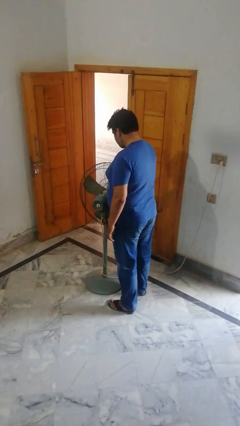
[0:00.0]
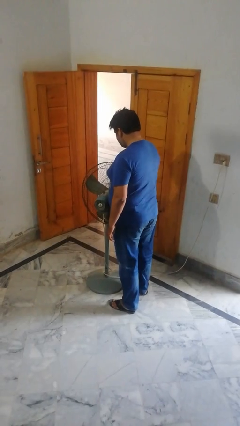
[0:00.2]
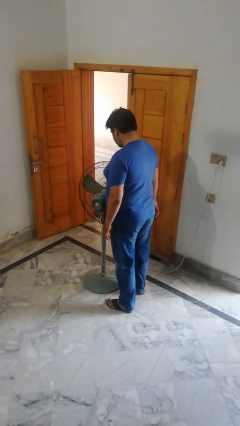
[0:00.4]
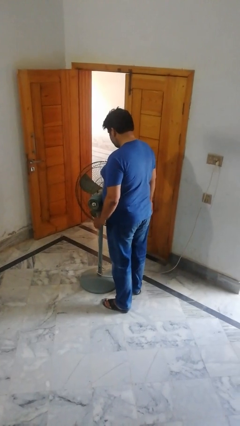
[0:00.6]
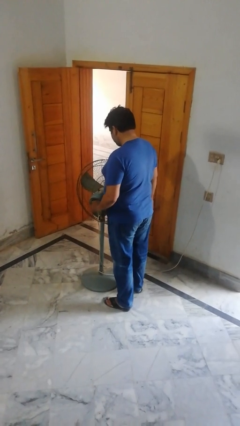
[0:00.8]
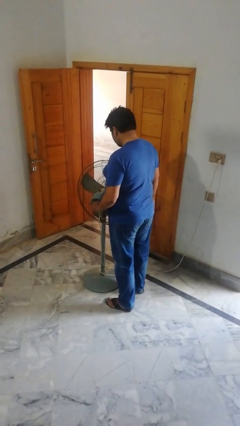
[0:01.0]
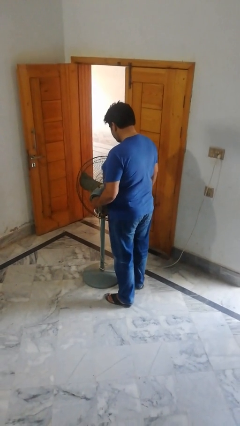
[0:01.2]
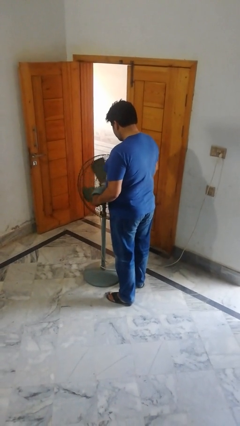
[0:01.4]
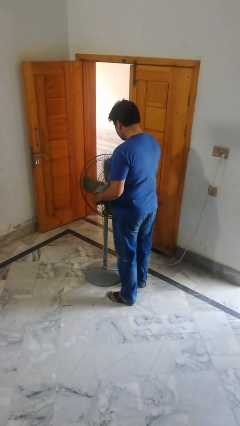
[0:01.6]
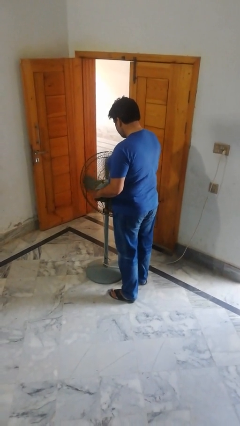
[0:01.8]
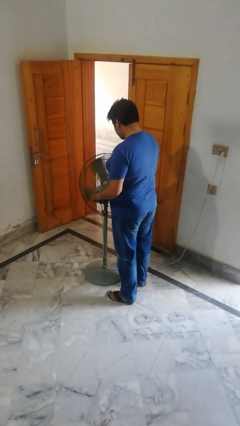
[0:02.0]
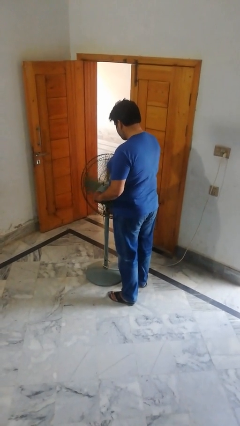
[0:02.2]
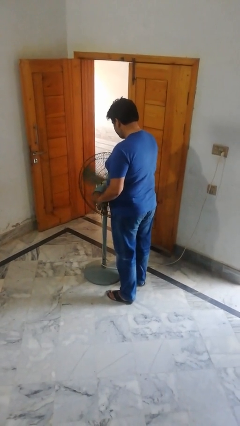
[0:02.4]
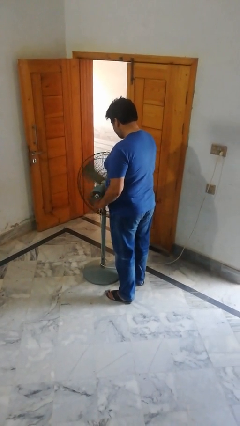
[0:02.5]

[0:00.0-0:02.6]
person turns on fan

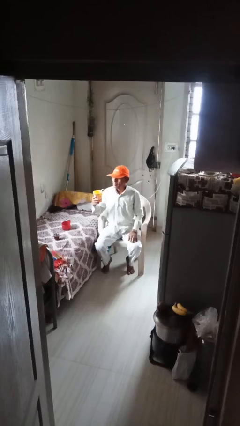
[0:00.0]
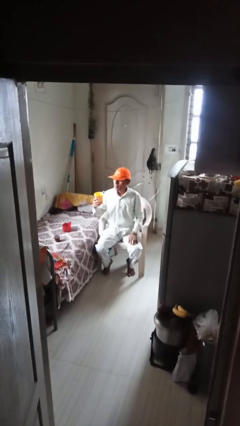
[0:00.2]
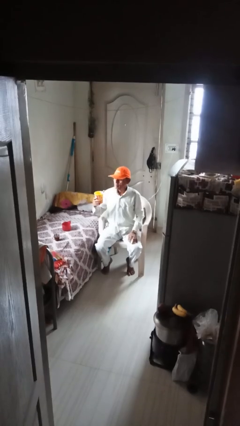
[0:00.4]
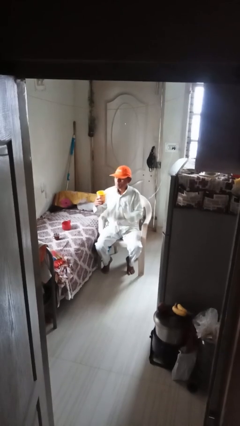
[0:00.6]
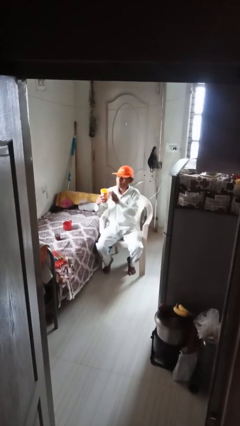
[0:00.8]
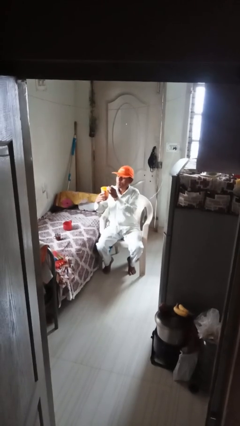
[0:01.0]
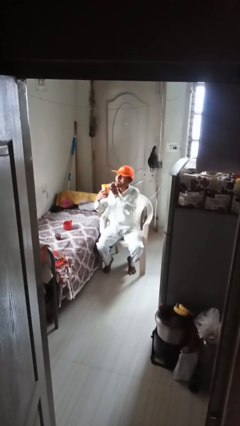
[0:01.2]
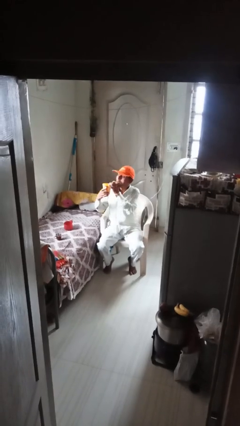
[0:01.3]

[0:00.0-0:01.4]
person drinks from straw

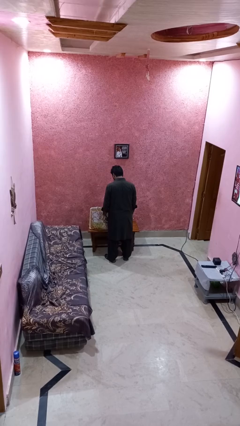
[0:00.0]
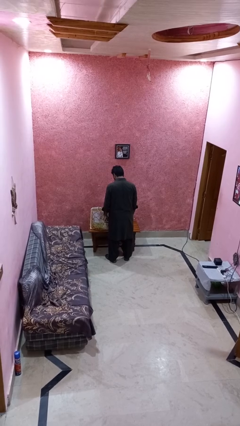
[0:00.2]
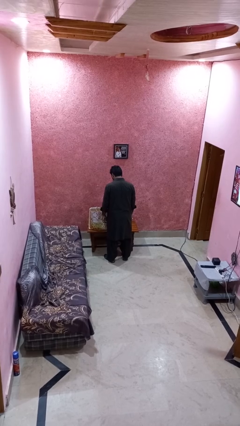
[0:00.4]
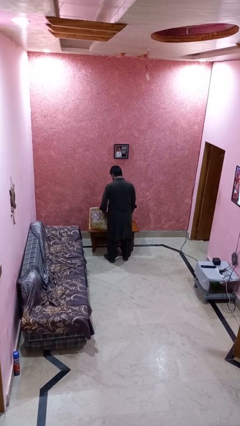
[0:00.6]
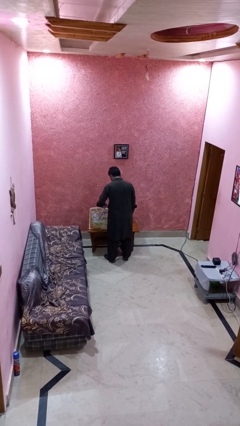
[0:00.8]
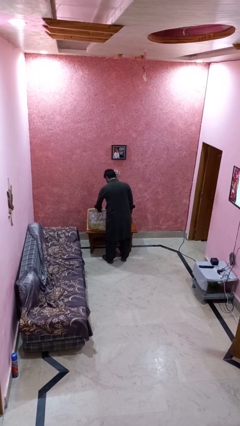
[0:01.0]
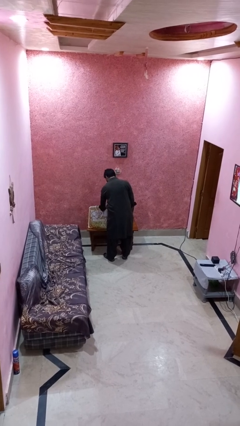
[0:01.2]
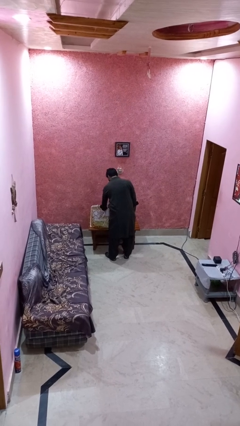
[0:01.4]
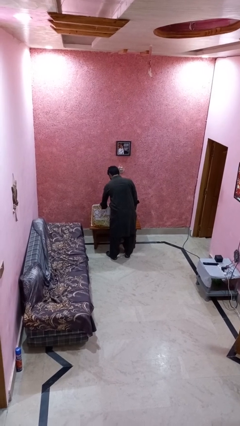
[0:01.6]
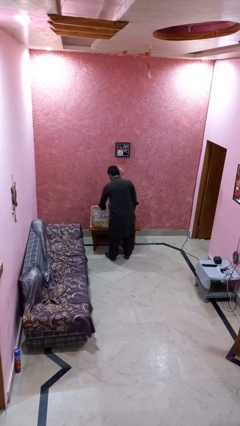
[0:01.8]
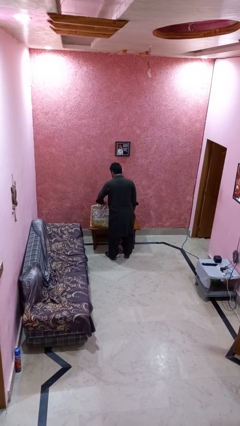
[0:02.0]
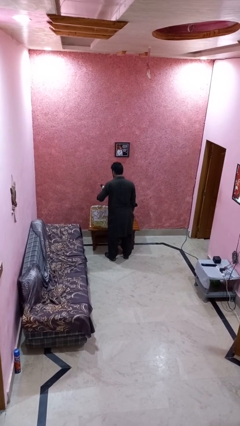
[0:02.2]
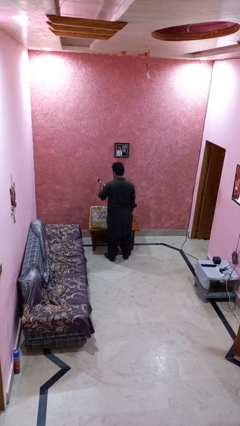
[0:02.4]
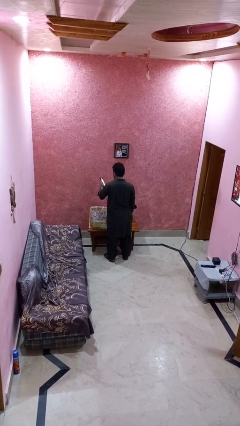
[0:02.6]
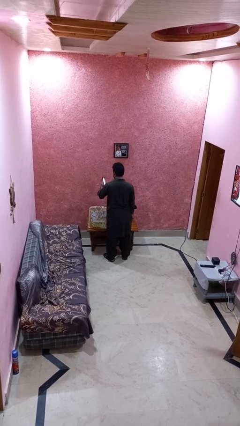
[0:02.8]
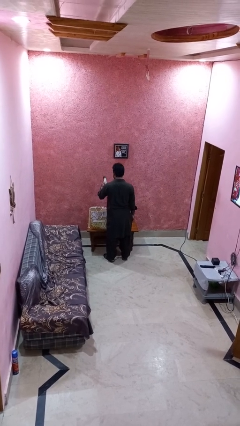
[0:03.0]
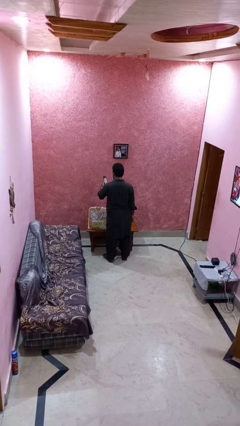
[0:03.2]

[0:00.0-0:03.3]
person takes object from bag

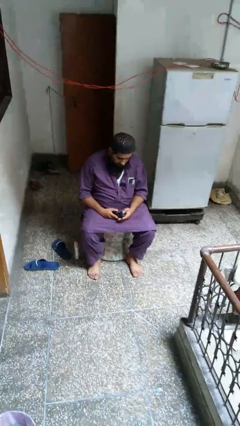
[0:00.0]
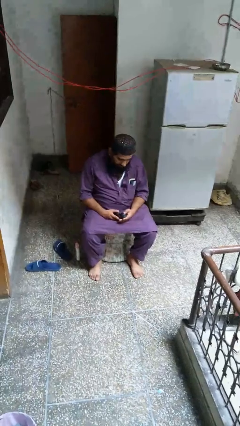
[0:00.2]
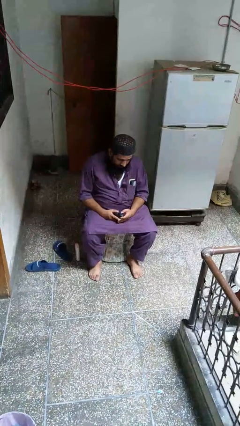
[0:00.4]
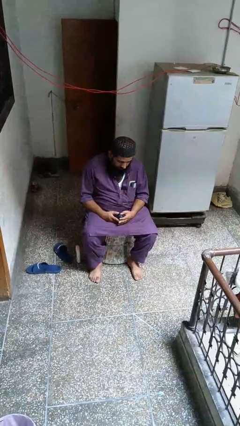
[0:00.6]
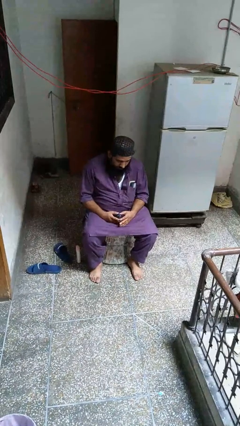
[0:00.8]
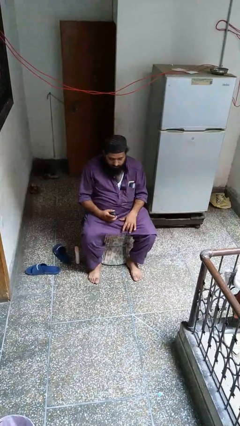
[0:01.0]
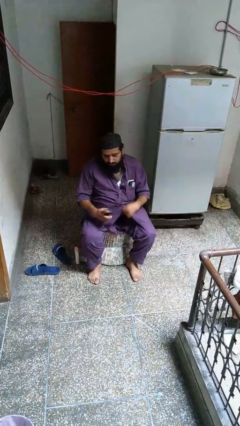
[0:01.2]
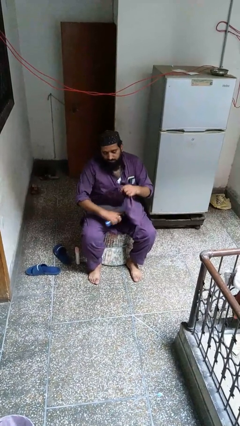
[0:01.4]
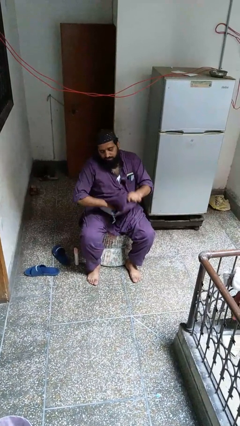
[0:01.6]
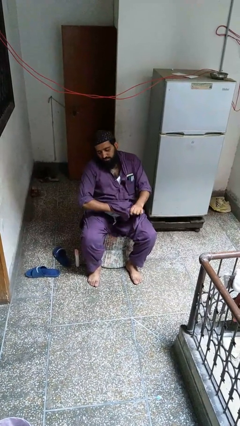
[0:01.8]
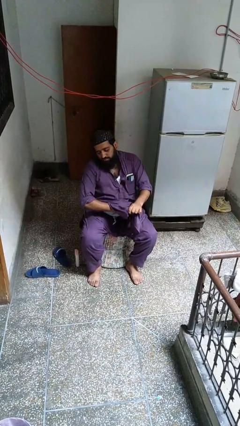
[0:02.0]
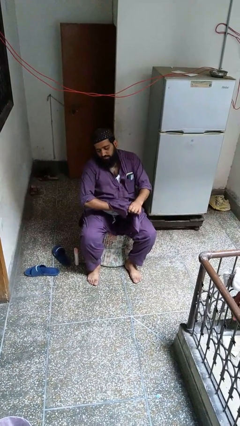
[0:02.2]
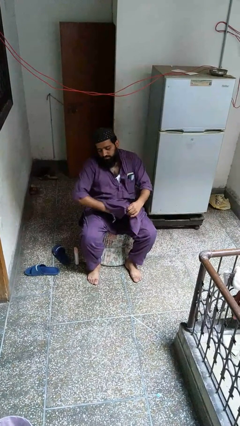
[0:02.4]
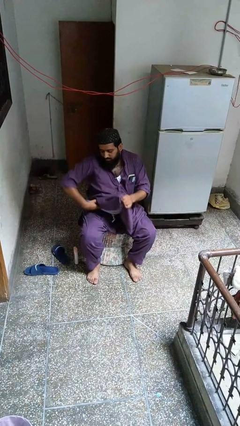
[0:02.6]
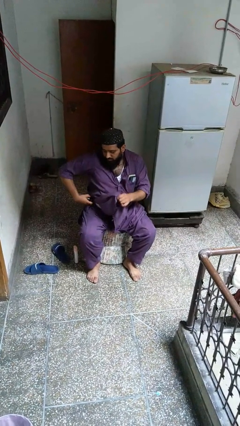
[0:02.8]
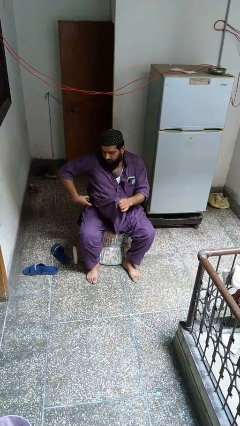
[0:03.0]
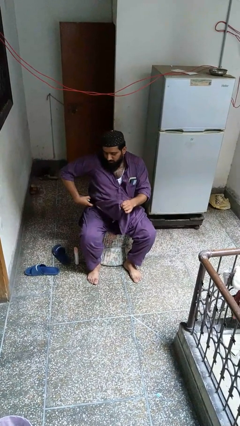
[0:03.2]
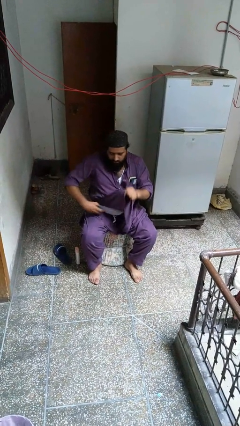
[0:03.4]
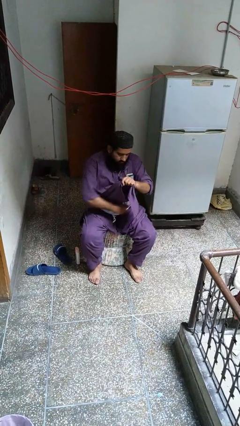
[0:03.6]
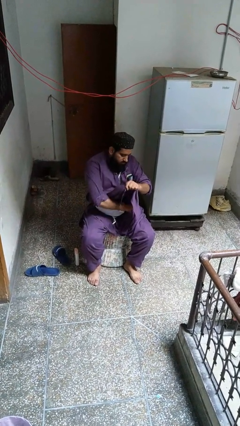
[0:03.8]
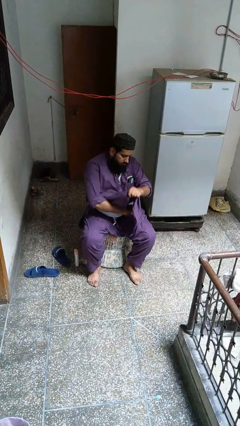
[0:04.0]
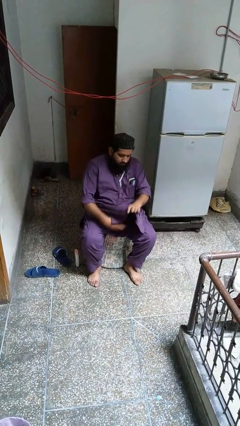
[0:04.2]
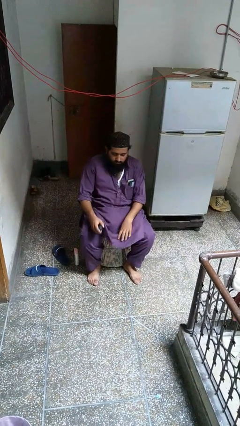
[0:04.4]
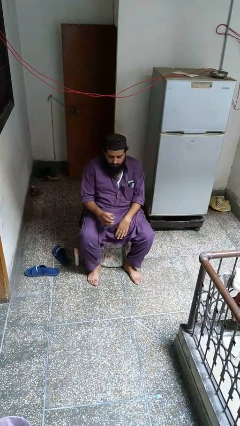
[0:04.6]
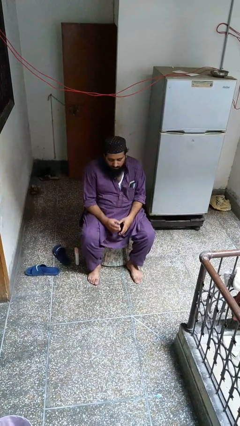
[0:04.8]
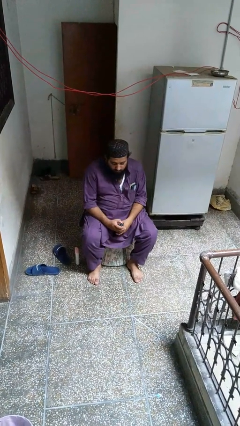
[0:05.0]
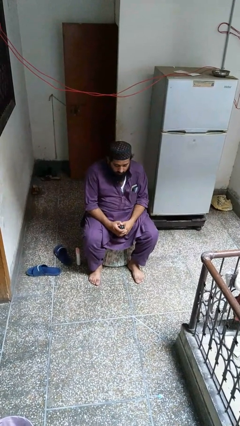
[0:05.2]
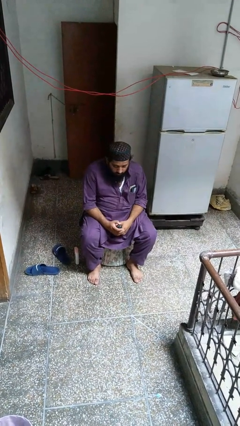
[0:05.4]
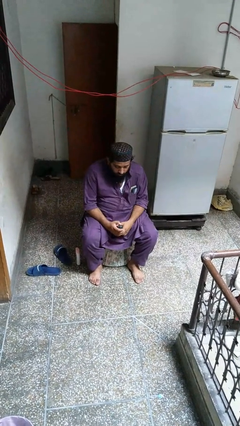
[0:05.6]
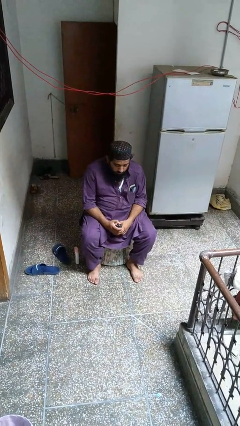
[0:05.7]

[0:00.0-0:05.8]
person applies deodorant

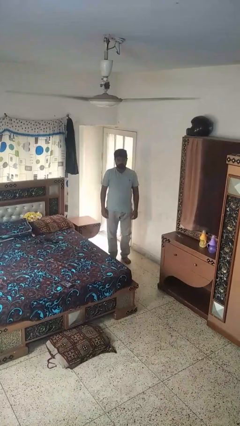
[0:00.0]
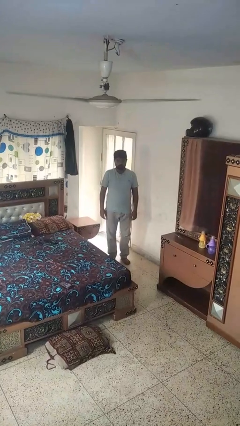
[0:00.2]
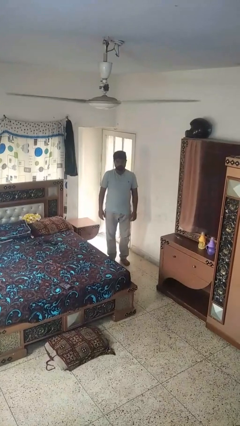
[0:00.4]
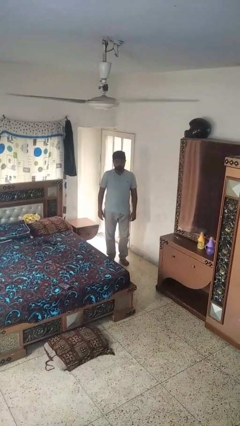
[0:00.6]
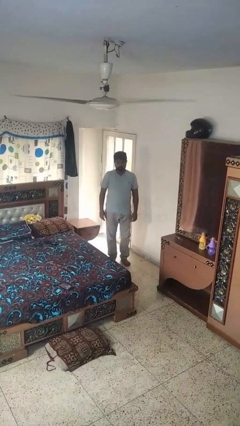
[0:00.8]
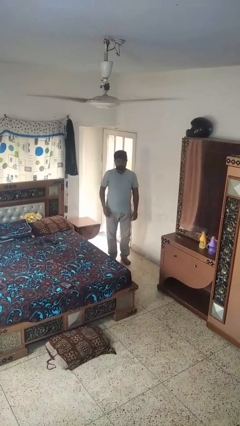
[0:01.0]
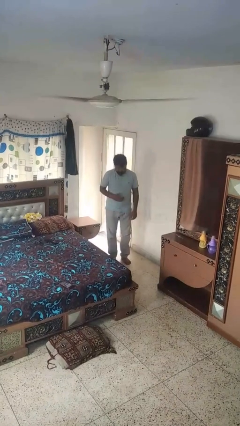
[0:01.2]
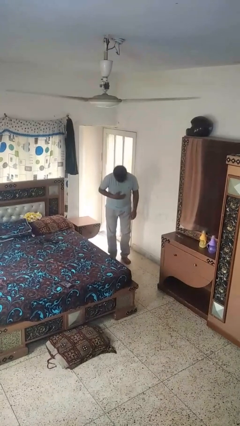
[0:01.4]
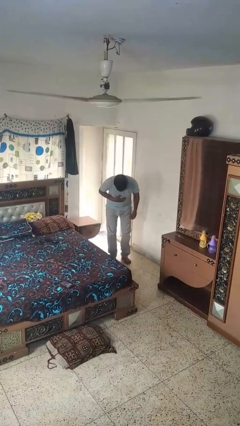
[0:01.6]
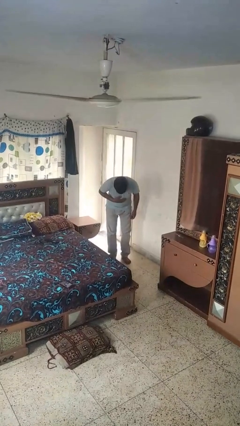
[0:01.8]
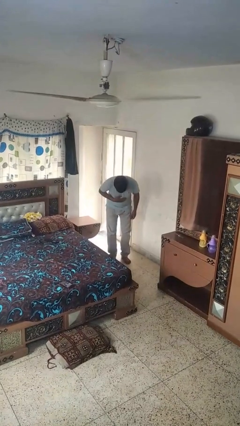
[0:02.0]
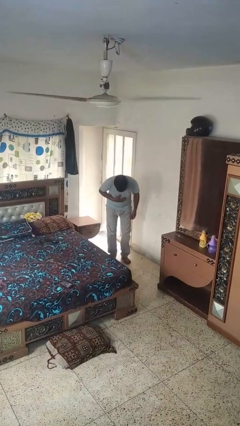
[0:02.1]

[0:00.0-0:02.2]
person bows

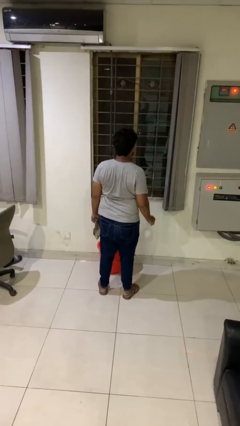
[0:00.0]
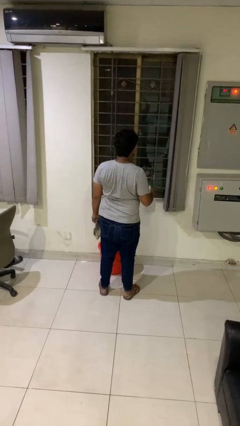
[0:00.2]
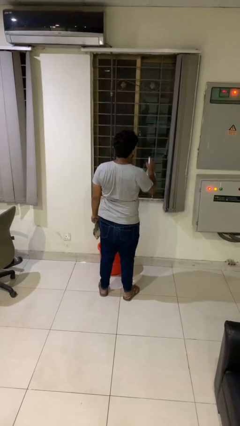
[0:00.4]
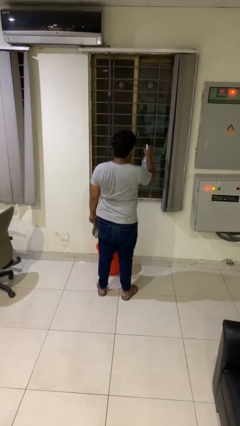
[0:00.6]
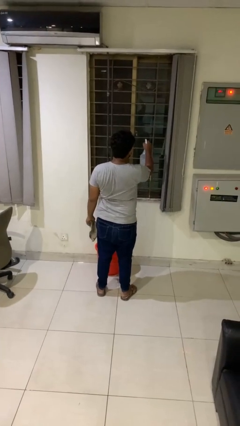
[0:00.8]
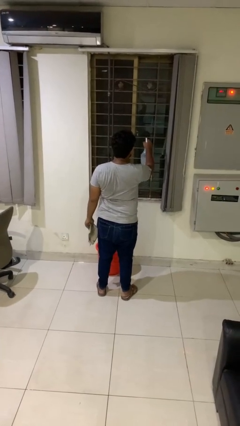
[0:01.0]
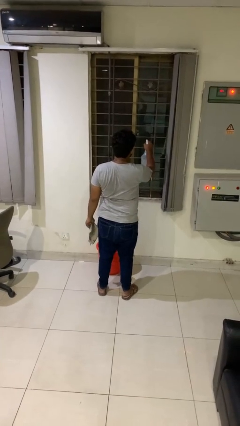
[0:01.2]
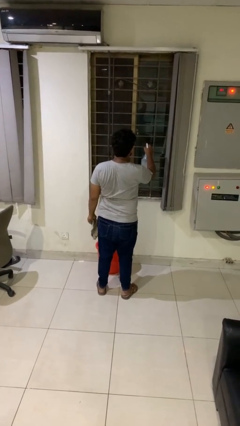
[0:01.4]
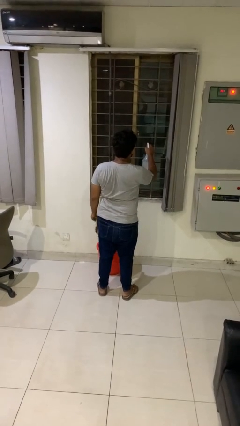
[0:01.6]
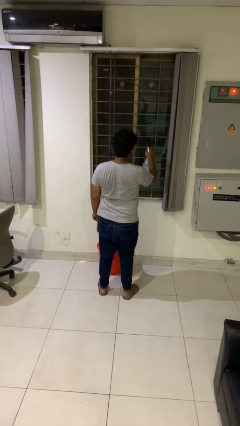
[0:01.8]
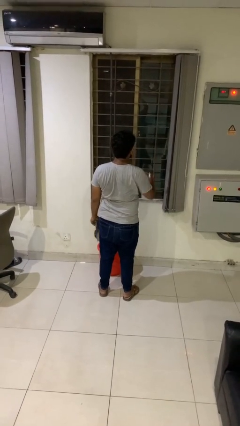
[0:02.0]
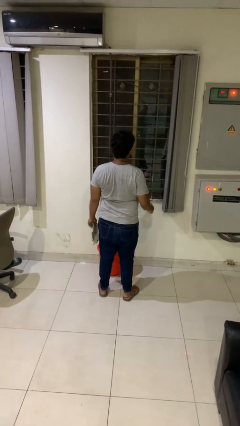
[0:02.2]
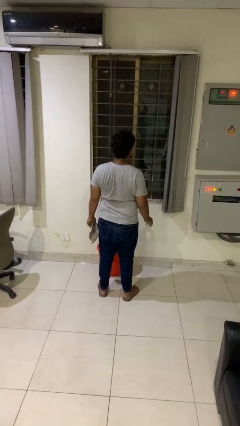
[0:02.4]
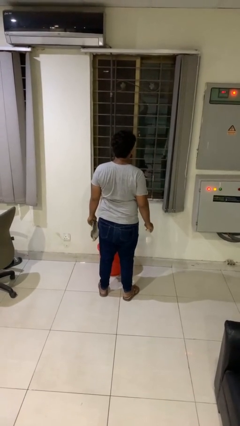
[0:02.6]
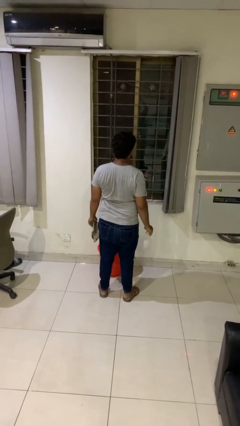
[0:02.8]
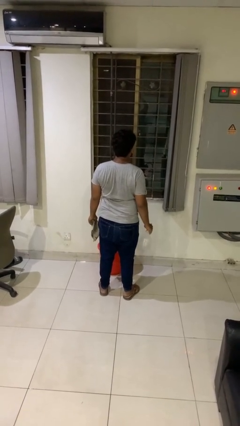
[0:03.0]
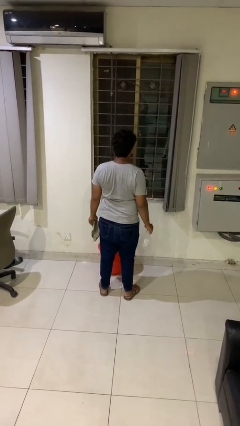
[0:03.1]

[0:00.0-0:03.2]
person sprays from bottle
